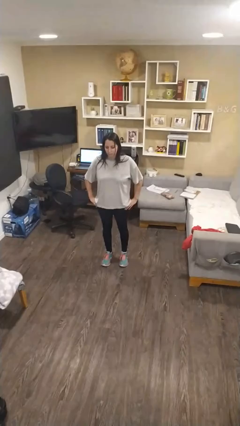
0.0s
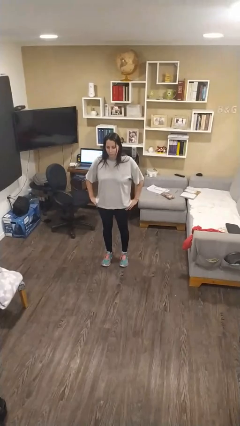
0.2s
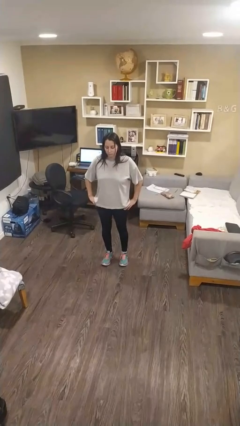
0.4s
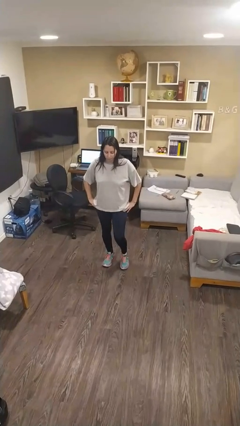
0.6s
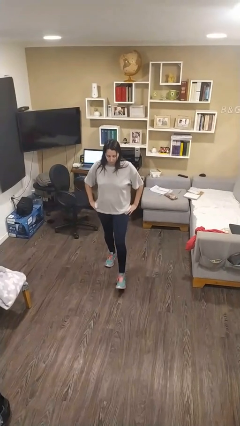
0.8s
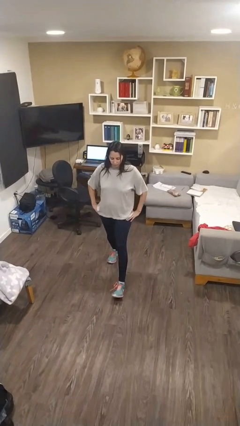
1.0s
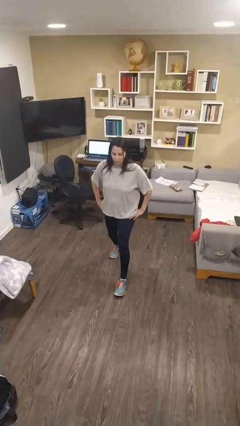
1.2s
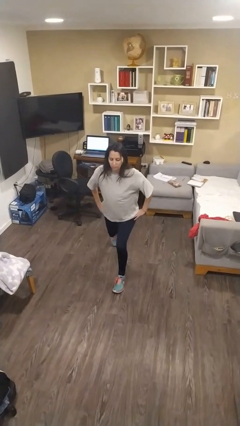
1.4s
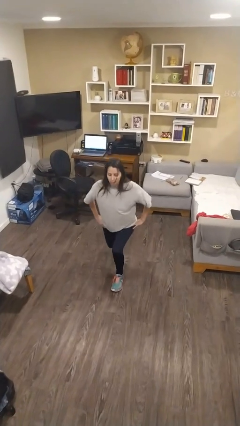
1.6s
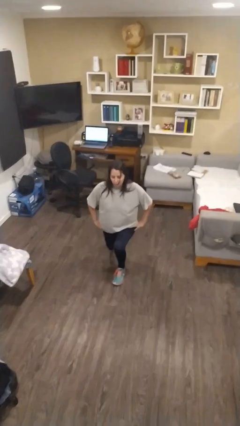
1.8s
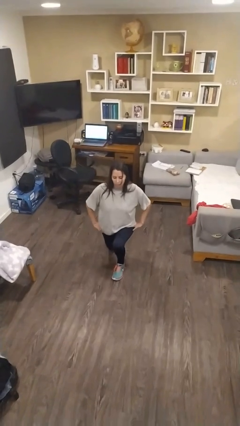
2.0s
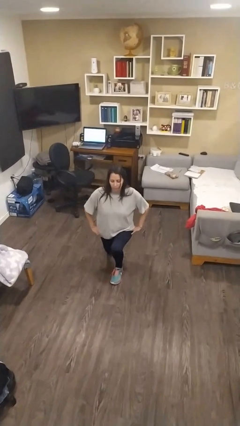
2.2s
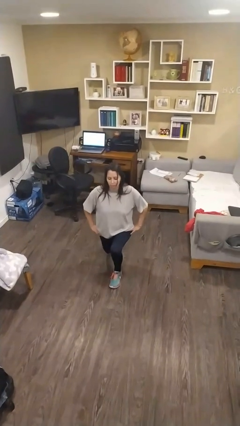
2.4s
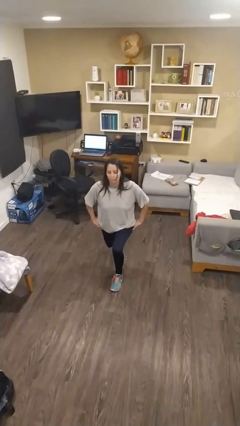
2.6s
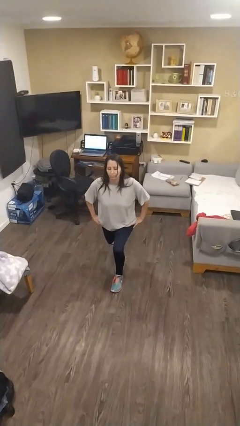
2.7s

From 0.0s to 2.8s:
person exercises with lunges

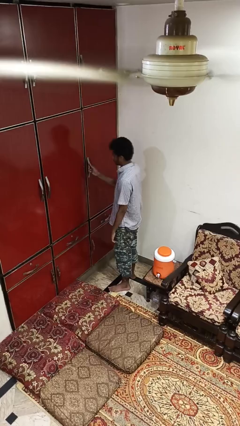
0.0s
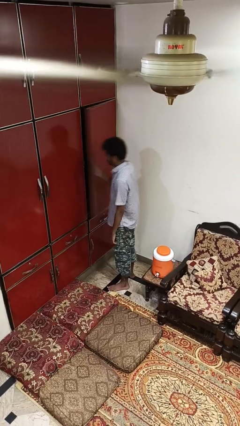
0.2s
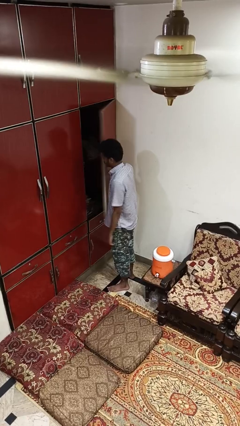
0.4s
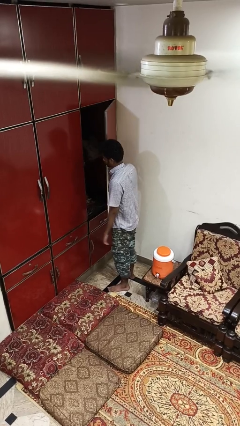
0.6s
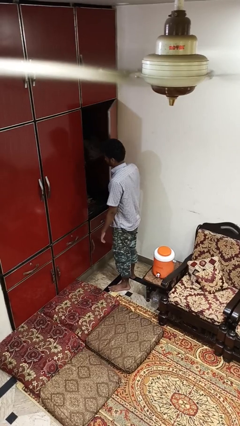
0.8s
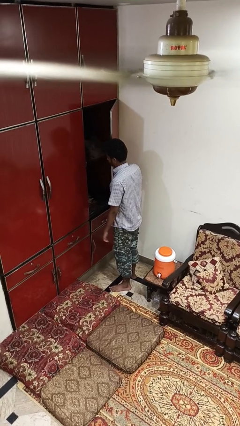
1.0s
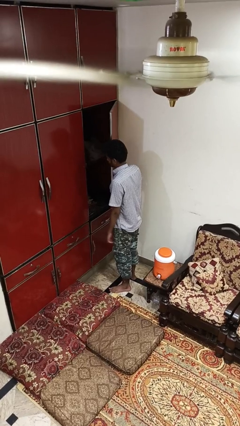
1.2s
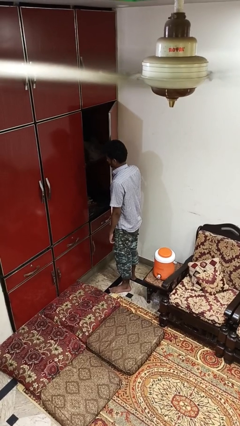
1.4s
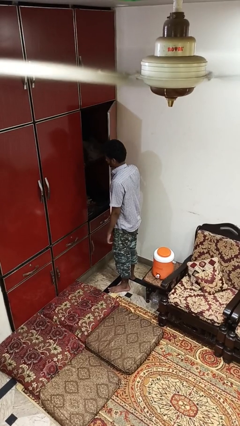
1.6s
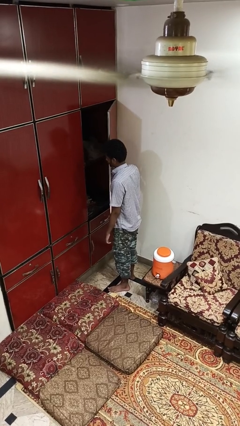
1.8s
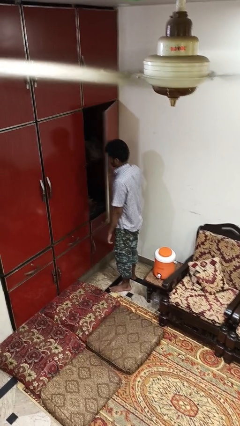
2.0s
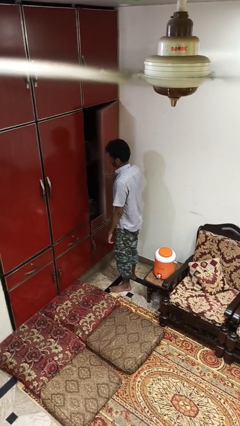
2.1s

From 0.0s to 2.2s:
person closes cabinet

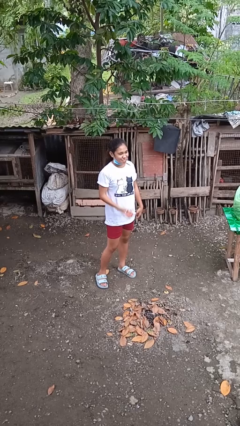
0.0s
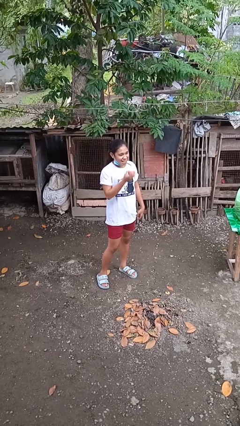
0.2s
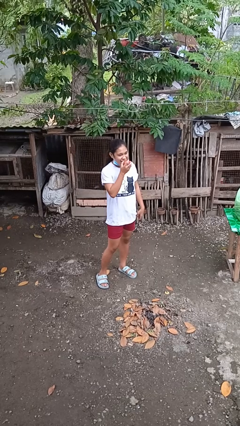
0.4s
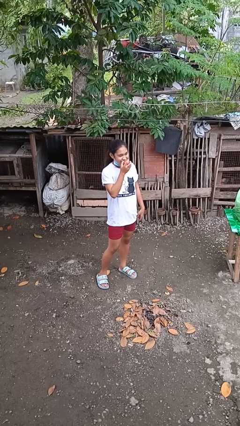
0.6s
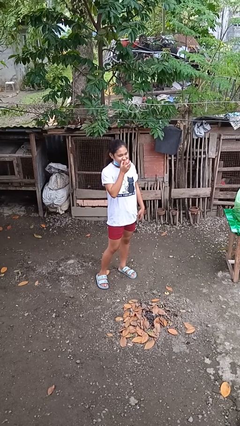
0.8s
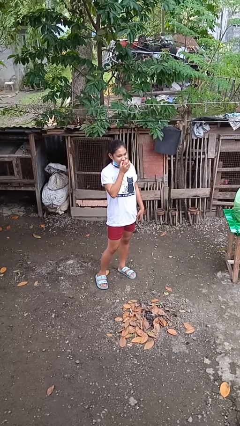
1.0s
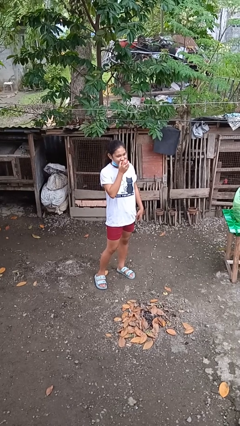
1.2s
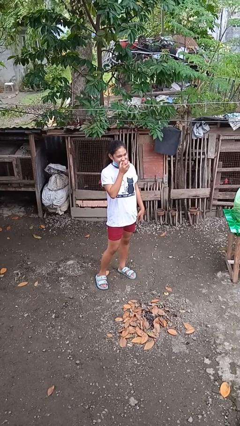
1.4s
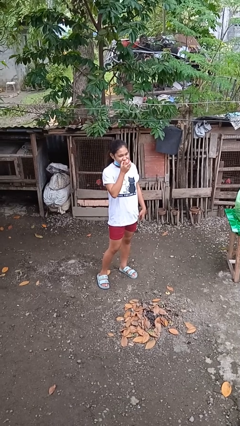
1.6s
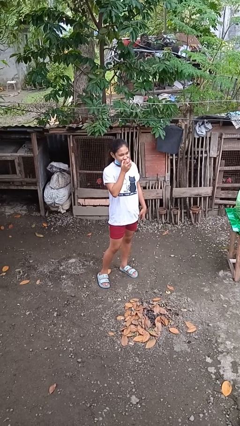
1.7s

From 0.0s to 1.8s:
person eats apple

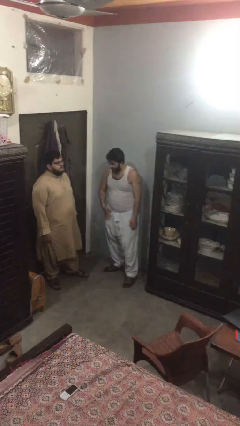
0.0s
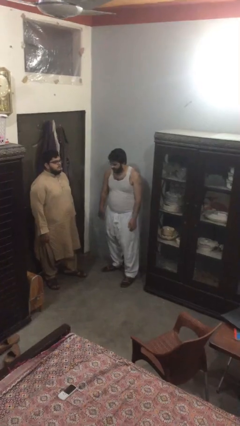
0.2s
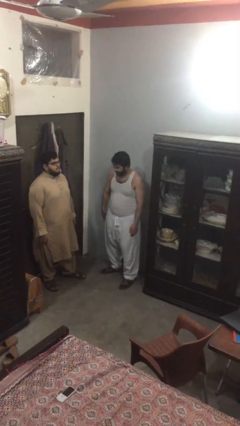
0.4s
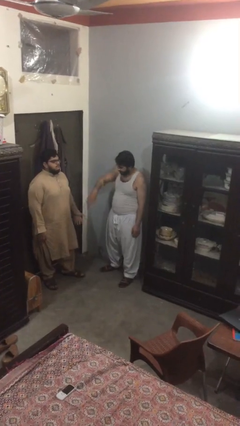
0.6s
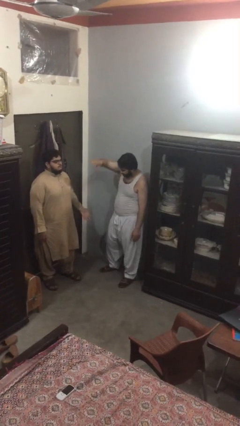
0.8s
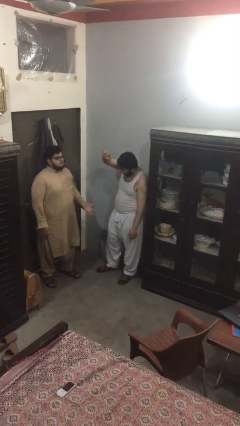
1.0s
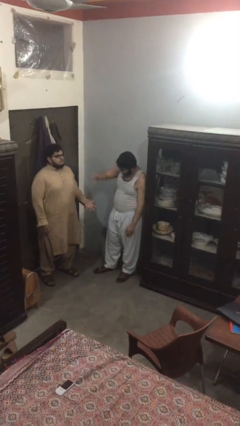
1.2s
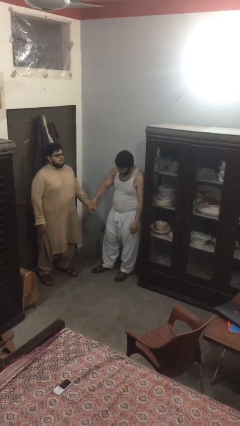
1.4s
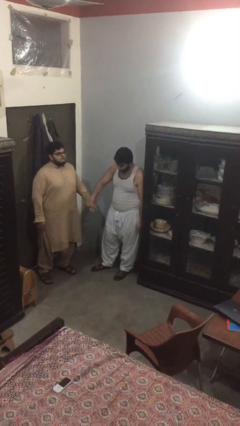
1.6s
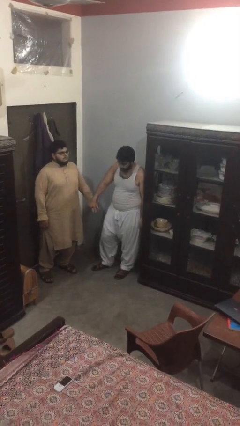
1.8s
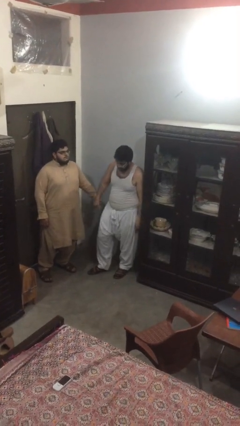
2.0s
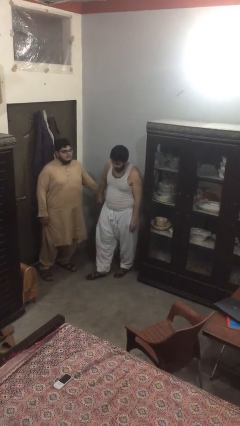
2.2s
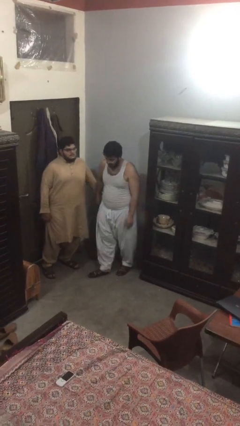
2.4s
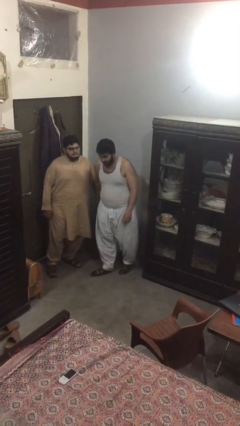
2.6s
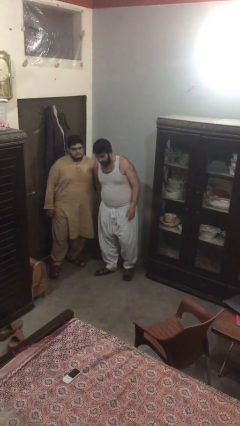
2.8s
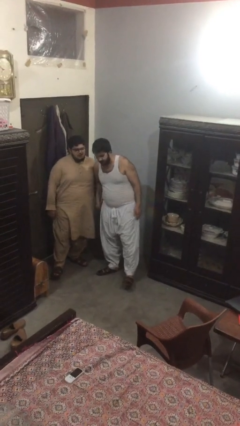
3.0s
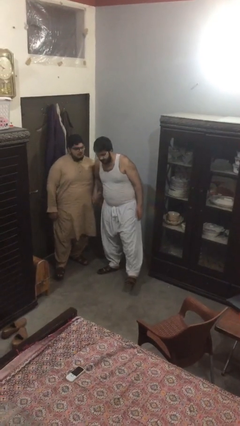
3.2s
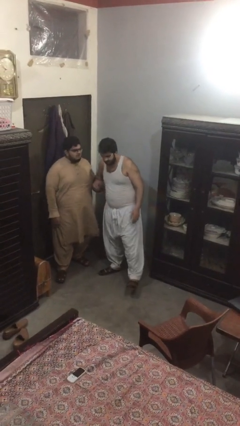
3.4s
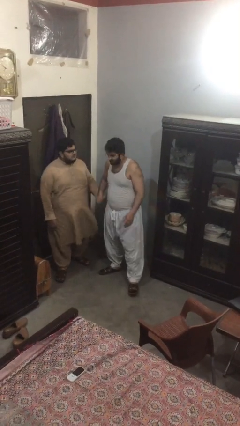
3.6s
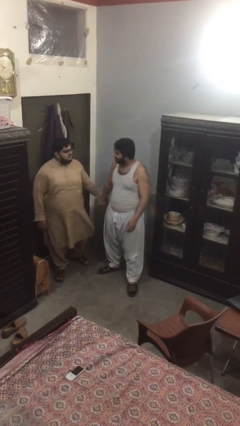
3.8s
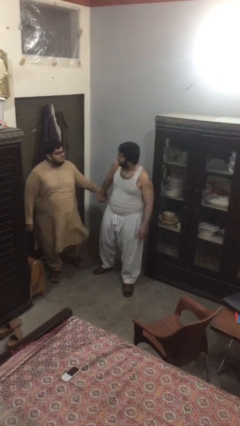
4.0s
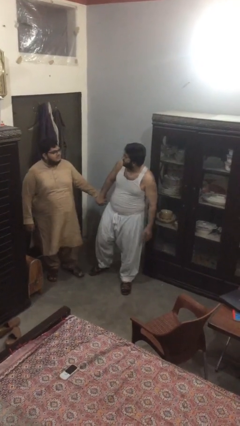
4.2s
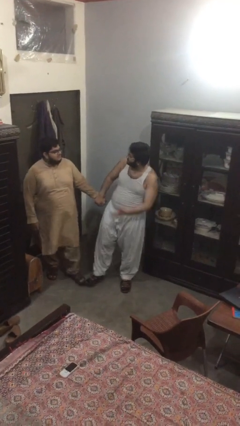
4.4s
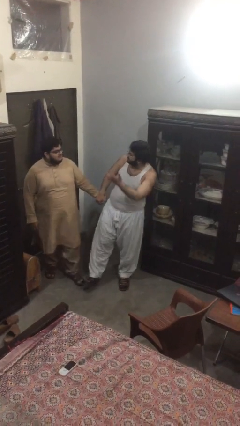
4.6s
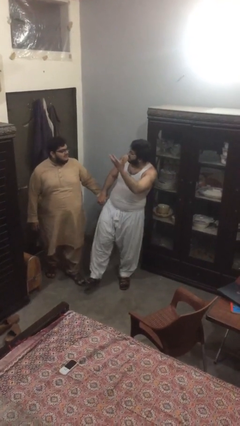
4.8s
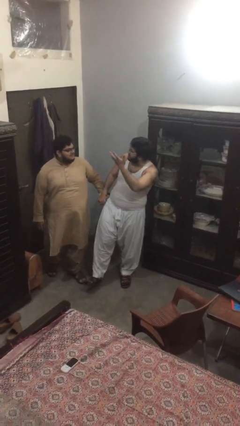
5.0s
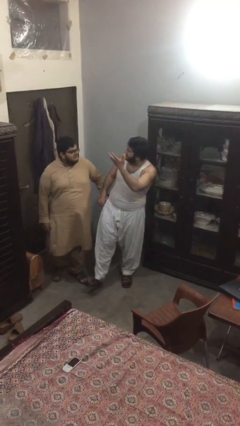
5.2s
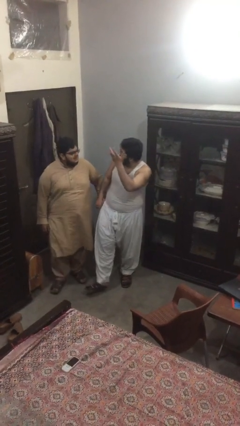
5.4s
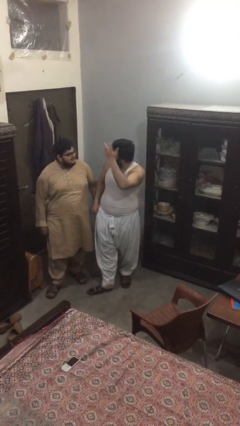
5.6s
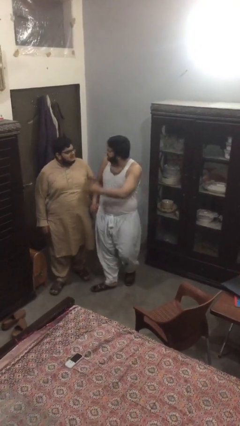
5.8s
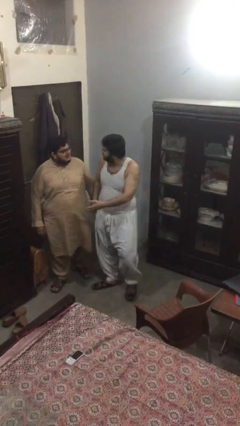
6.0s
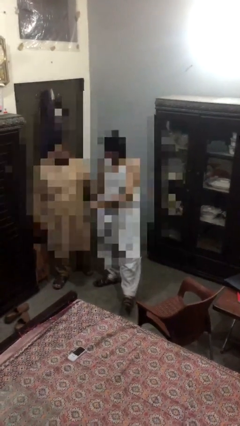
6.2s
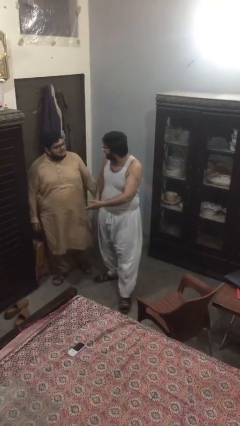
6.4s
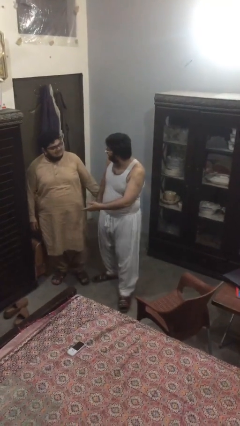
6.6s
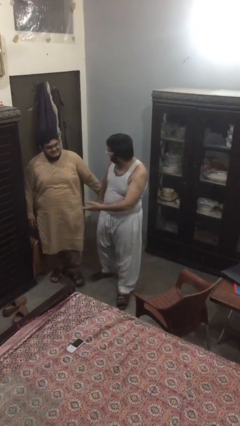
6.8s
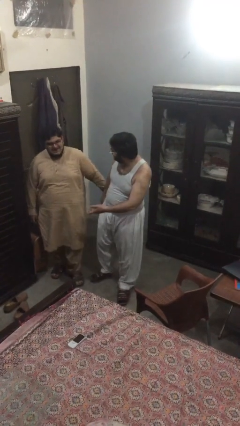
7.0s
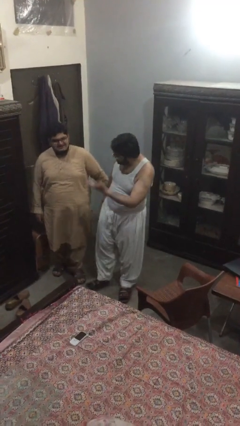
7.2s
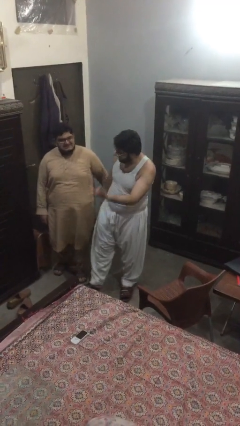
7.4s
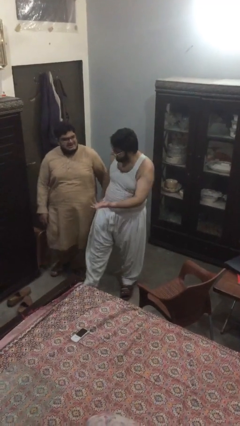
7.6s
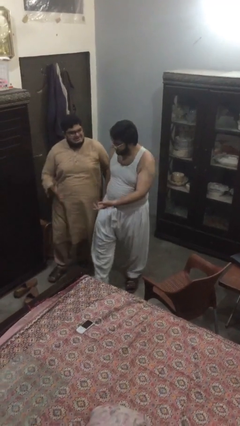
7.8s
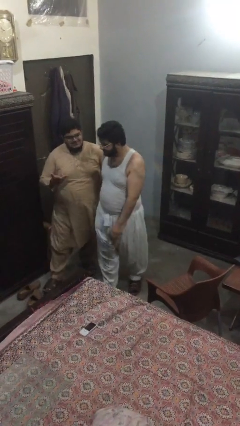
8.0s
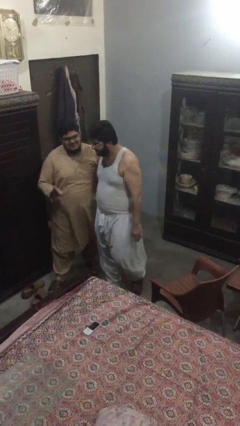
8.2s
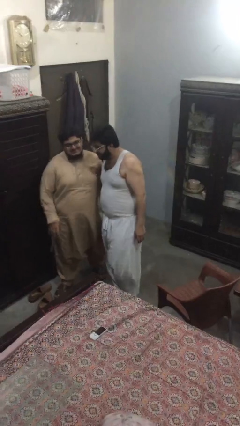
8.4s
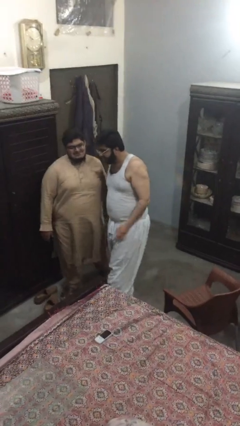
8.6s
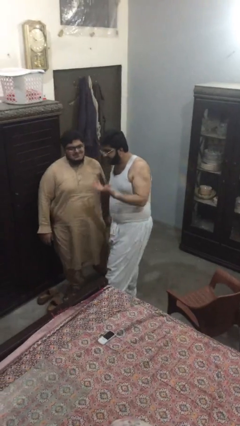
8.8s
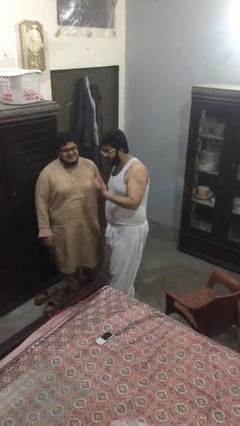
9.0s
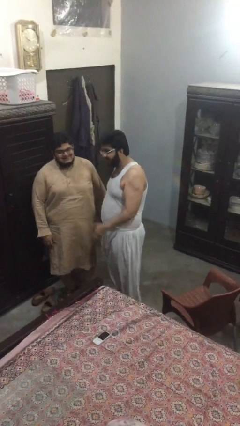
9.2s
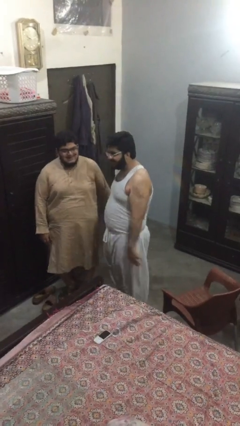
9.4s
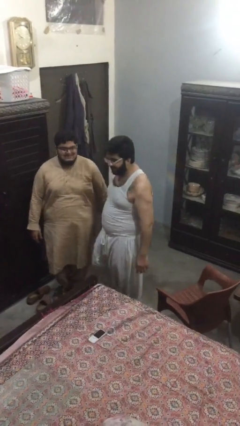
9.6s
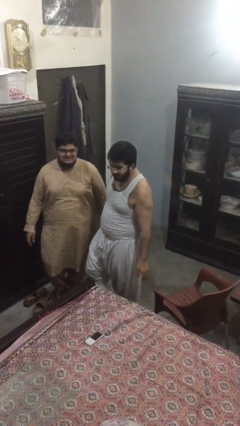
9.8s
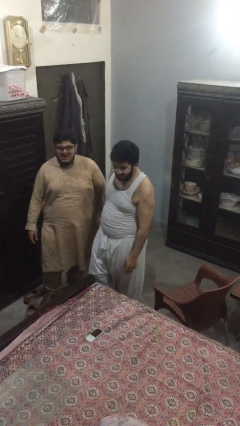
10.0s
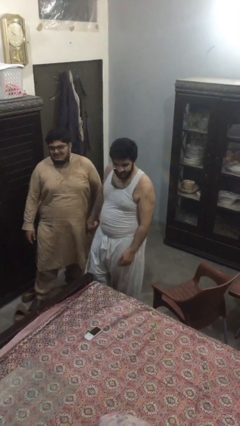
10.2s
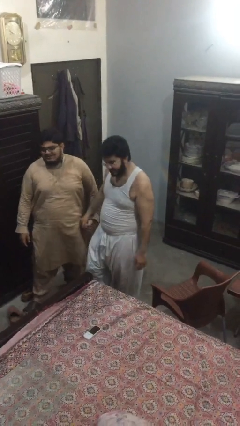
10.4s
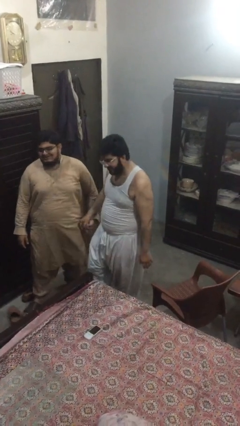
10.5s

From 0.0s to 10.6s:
person holds hand

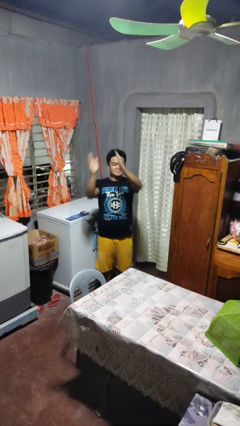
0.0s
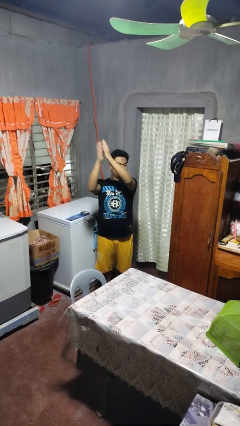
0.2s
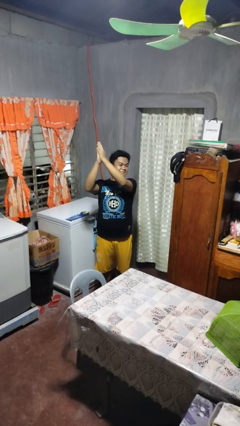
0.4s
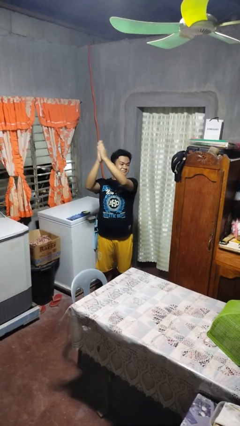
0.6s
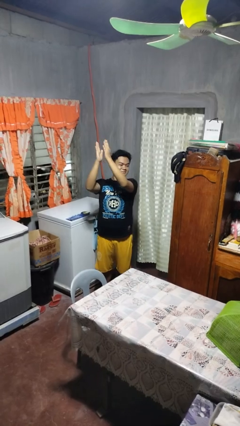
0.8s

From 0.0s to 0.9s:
person claps hands
